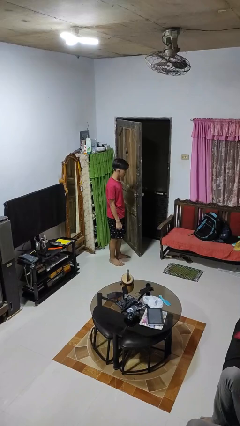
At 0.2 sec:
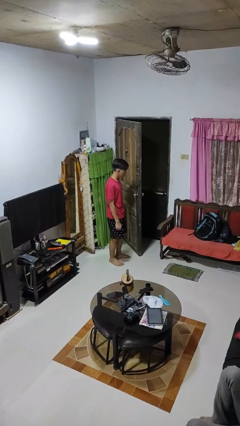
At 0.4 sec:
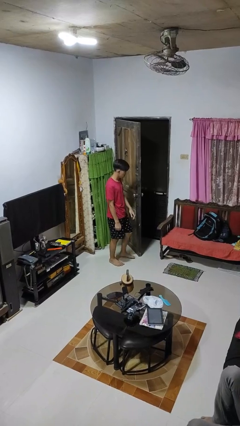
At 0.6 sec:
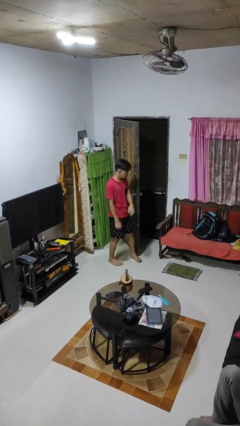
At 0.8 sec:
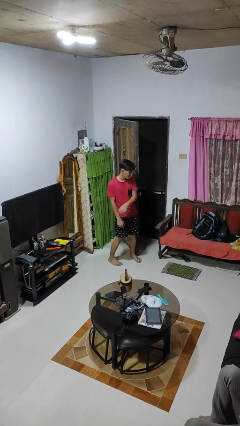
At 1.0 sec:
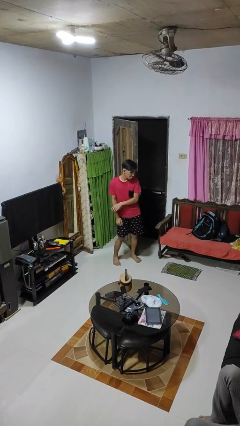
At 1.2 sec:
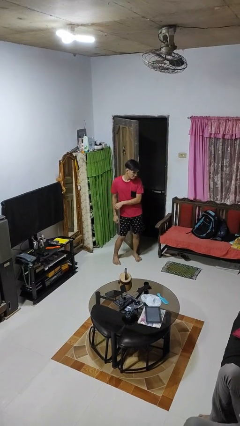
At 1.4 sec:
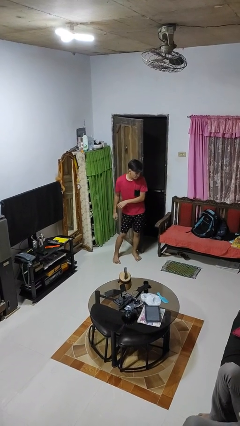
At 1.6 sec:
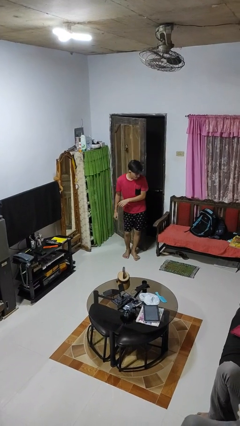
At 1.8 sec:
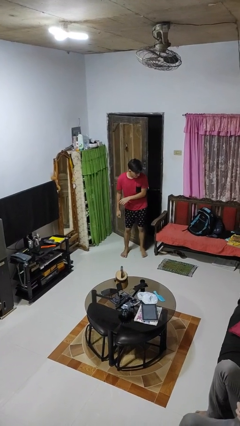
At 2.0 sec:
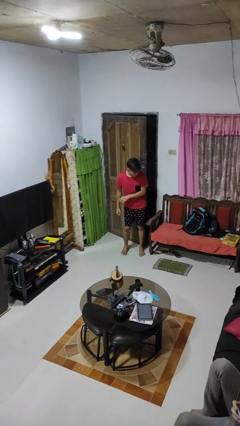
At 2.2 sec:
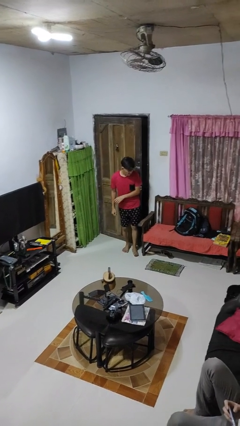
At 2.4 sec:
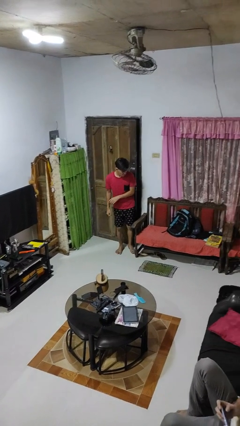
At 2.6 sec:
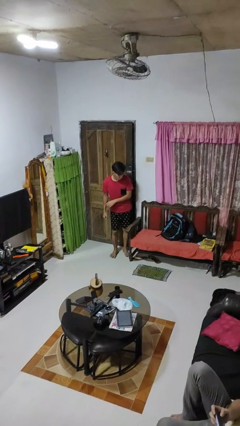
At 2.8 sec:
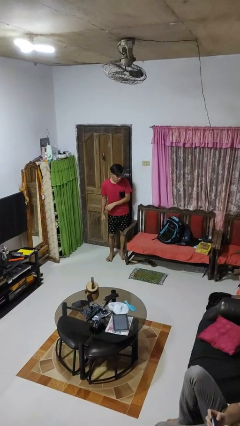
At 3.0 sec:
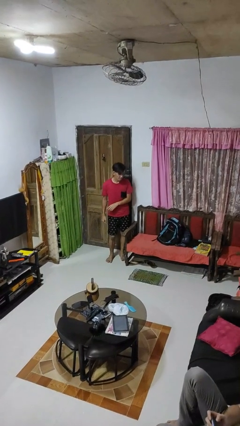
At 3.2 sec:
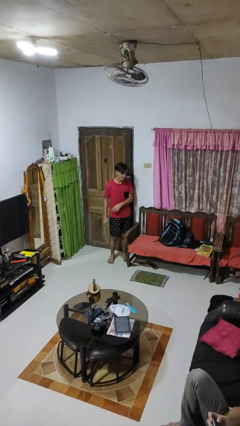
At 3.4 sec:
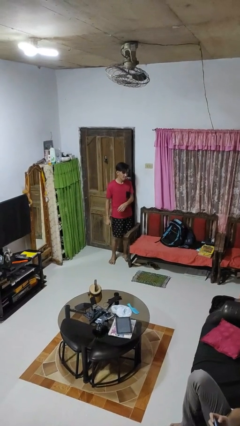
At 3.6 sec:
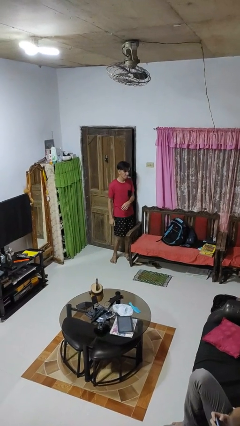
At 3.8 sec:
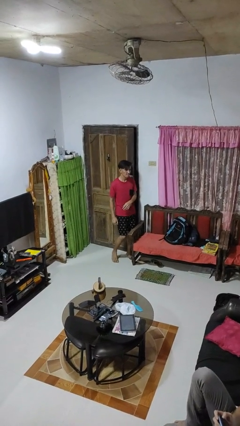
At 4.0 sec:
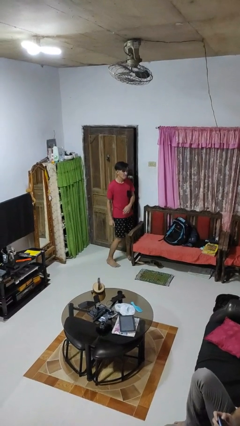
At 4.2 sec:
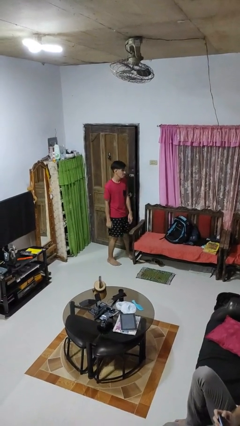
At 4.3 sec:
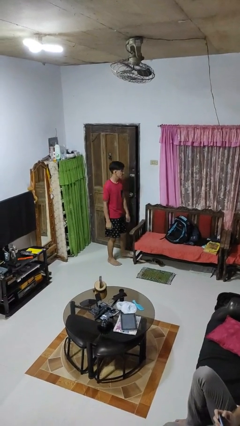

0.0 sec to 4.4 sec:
person closes door with hip

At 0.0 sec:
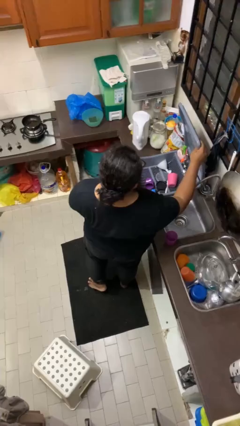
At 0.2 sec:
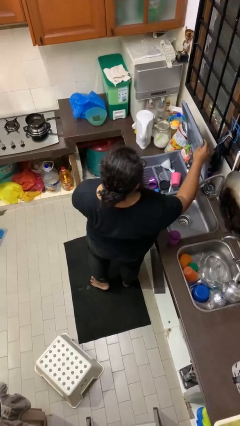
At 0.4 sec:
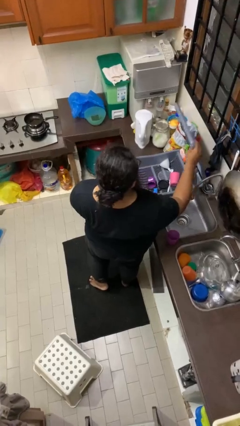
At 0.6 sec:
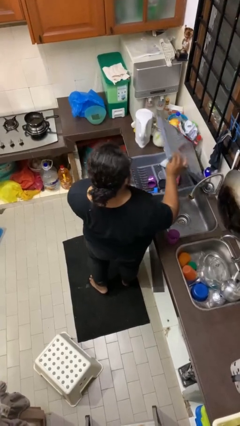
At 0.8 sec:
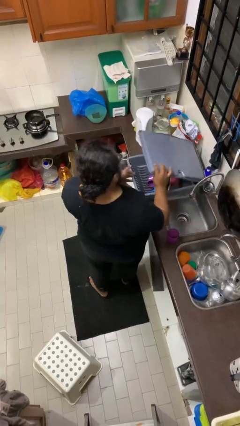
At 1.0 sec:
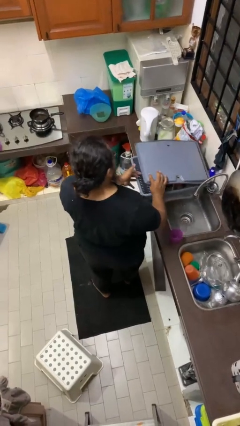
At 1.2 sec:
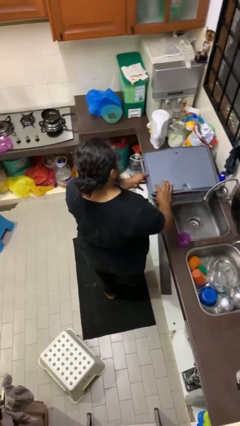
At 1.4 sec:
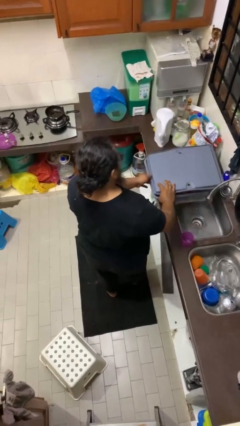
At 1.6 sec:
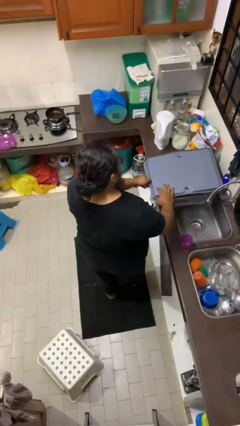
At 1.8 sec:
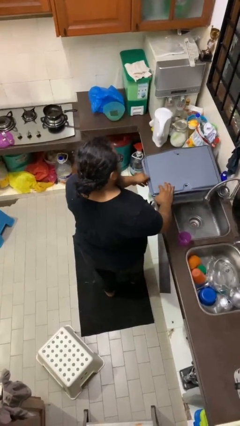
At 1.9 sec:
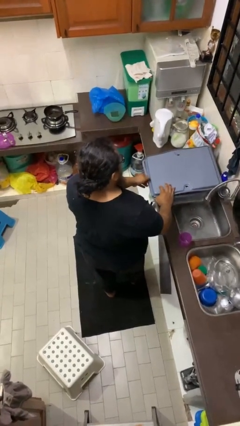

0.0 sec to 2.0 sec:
person closes dishwasher

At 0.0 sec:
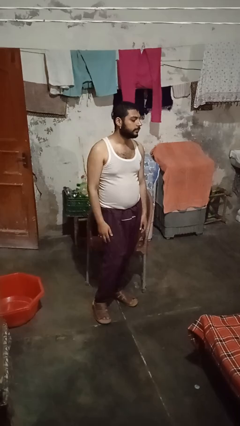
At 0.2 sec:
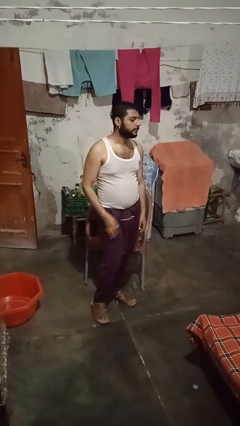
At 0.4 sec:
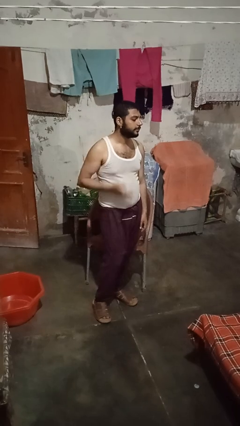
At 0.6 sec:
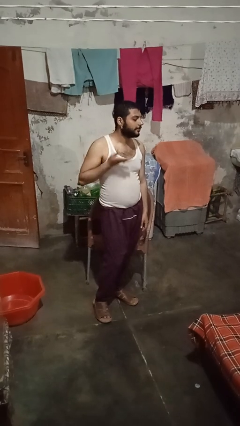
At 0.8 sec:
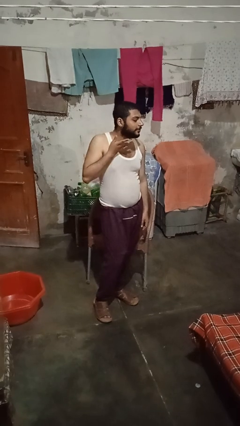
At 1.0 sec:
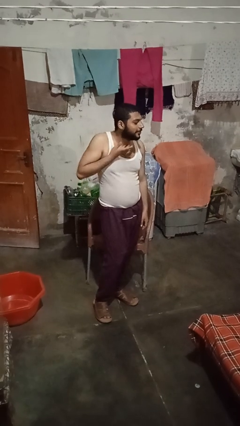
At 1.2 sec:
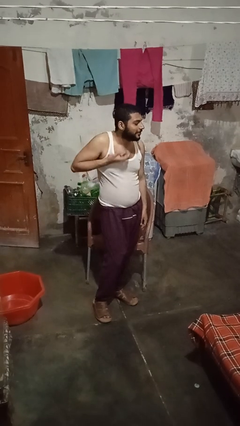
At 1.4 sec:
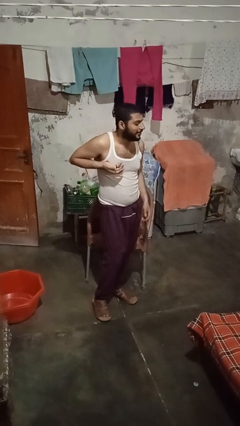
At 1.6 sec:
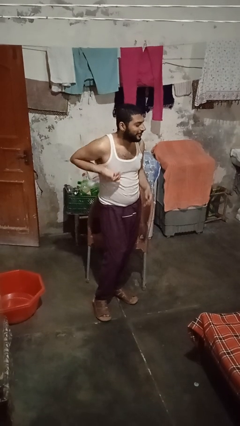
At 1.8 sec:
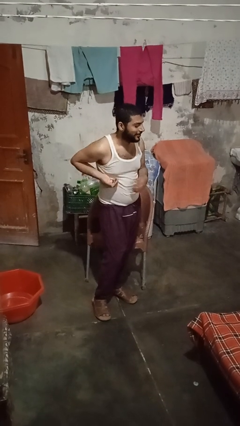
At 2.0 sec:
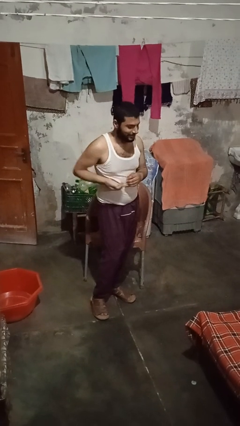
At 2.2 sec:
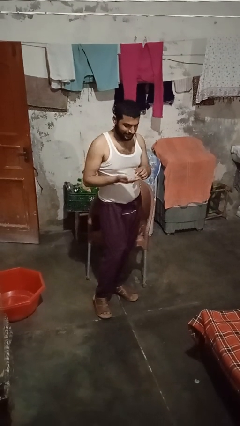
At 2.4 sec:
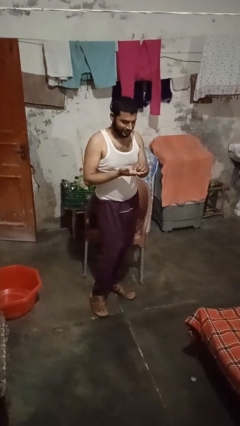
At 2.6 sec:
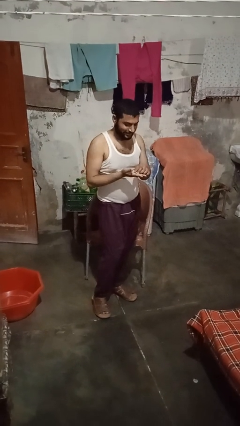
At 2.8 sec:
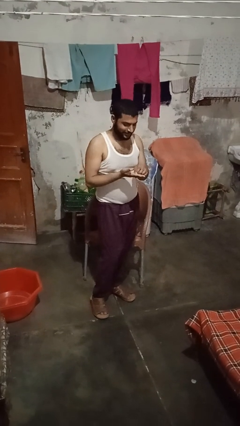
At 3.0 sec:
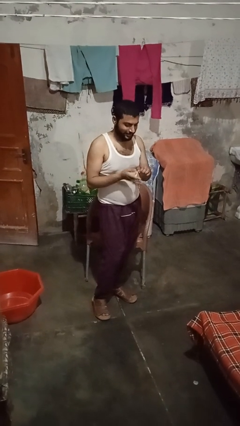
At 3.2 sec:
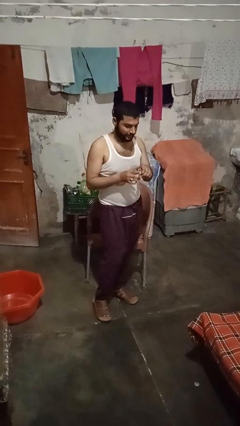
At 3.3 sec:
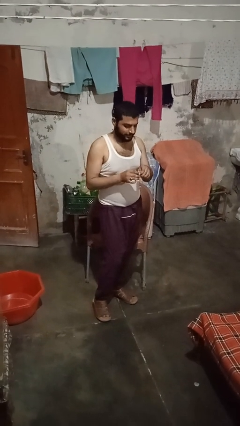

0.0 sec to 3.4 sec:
person takes off earrings

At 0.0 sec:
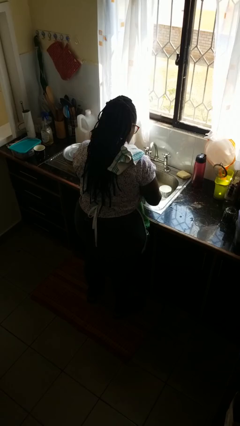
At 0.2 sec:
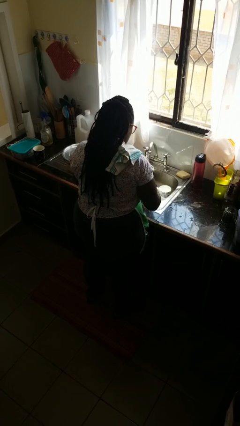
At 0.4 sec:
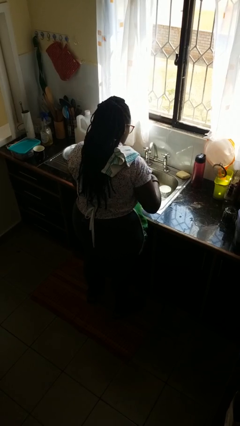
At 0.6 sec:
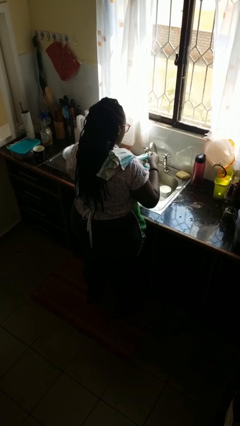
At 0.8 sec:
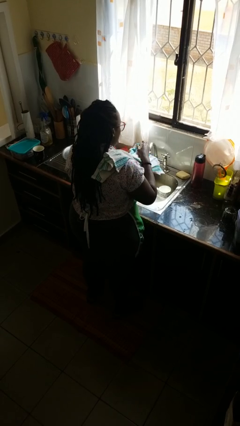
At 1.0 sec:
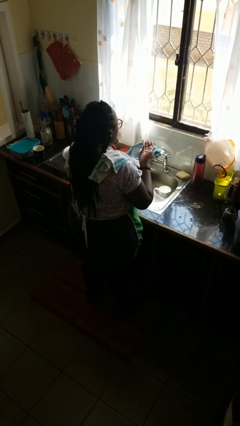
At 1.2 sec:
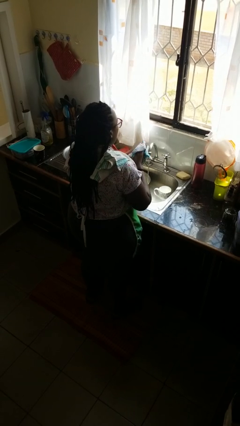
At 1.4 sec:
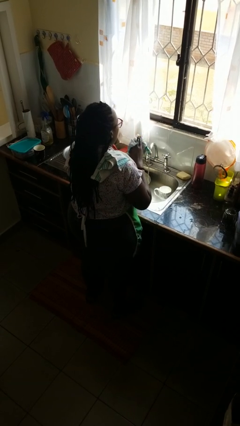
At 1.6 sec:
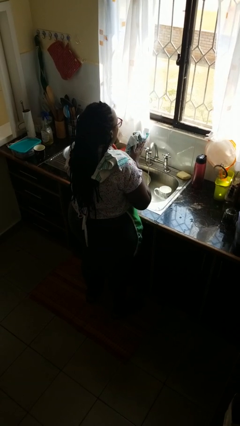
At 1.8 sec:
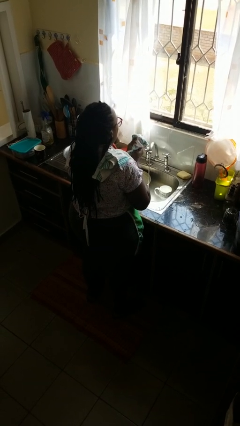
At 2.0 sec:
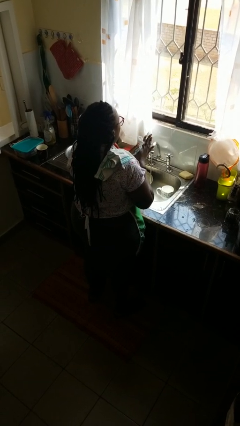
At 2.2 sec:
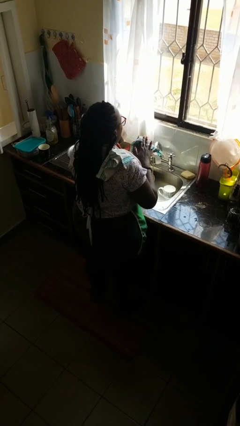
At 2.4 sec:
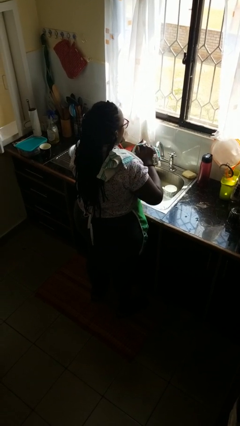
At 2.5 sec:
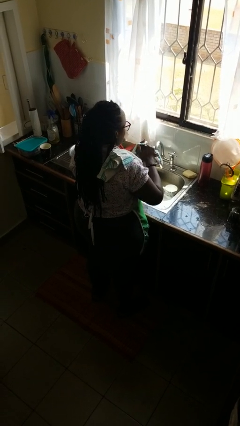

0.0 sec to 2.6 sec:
person dries hands with towel

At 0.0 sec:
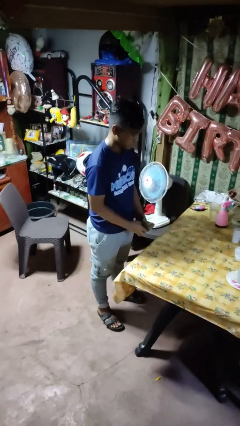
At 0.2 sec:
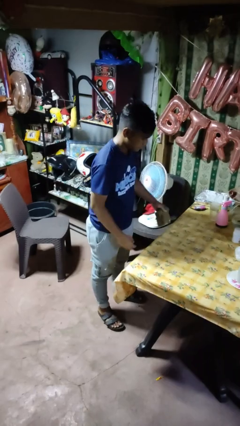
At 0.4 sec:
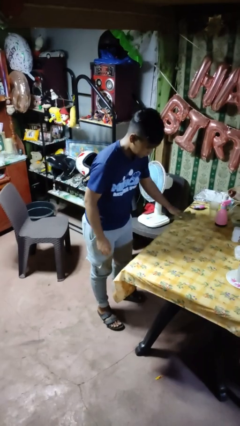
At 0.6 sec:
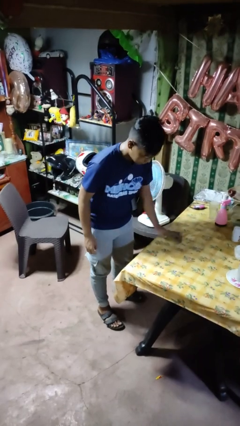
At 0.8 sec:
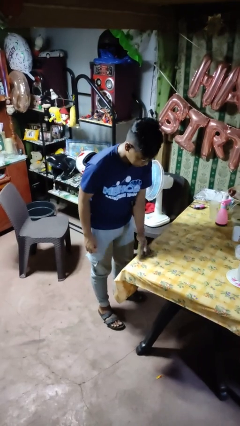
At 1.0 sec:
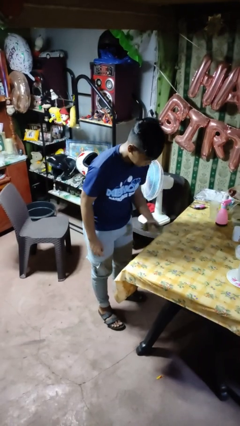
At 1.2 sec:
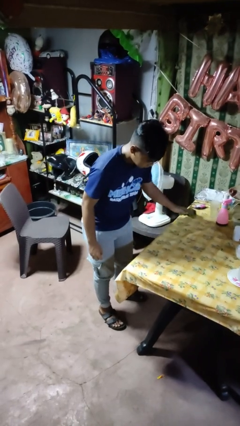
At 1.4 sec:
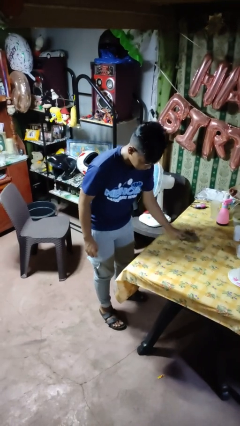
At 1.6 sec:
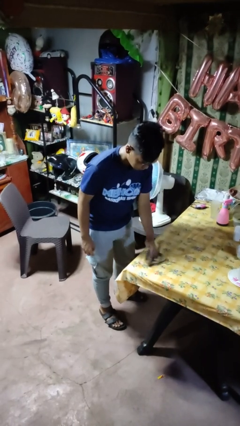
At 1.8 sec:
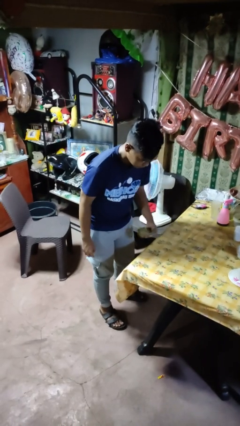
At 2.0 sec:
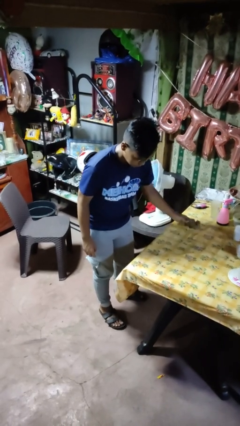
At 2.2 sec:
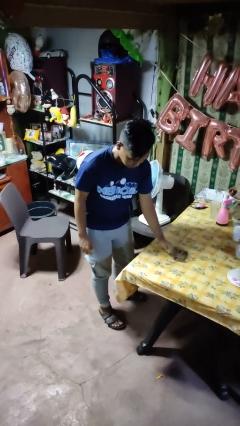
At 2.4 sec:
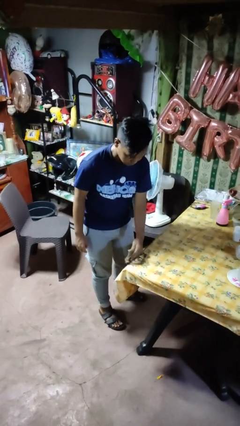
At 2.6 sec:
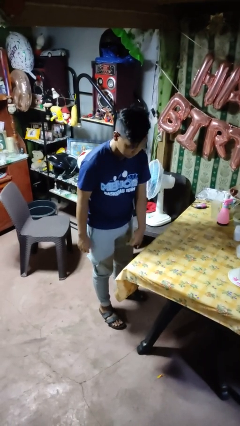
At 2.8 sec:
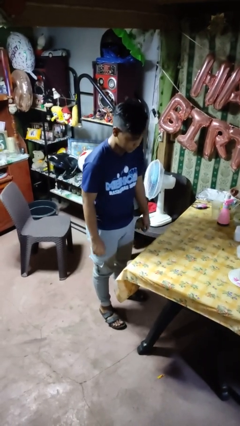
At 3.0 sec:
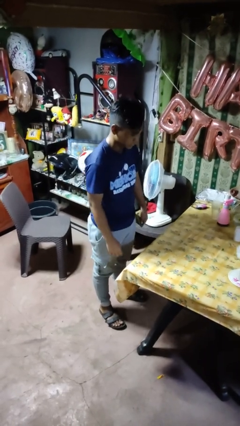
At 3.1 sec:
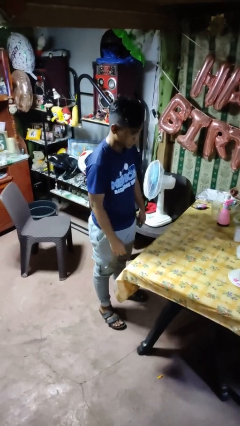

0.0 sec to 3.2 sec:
person cleans table with rag

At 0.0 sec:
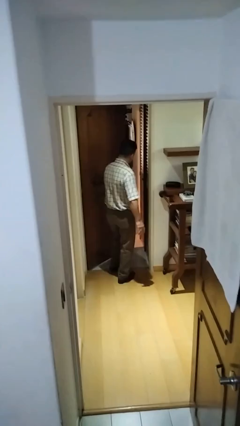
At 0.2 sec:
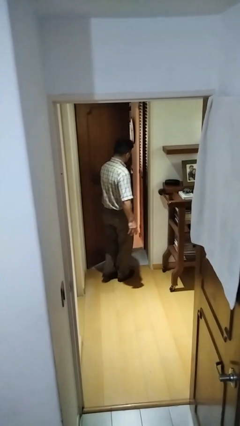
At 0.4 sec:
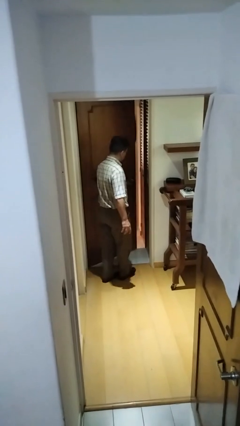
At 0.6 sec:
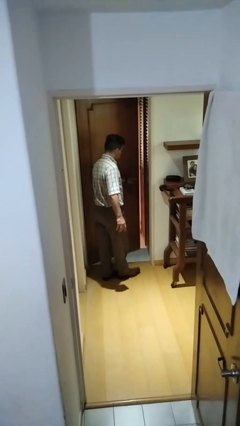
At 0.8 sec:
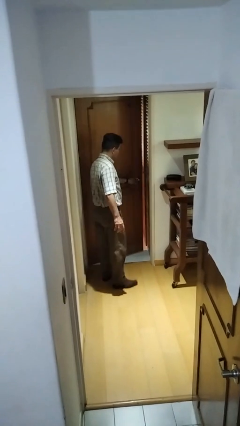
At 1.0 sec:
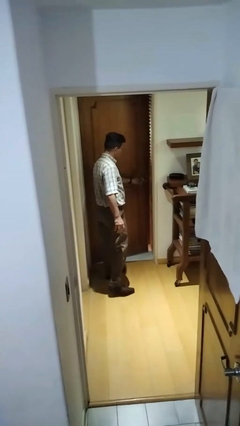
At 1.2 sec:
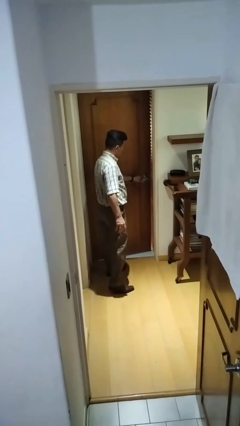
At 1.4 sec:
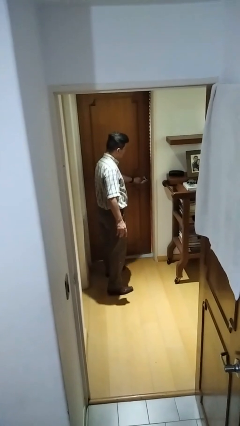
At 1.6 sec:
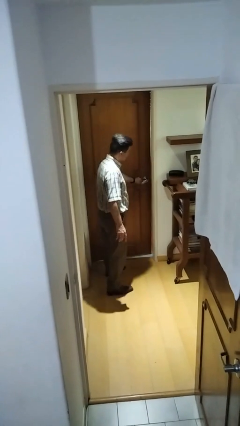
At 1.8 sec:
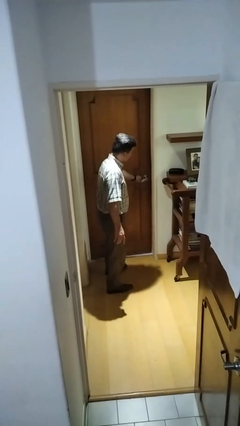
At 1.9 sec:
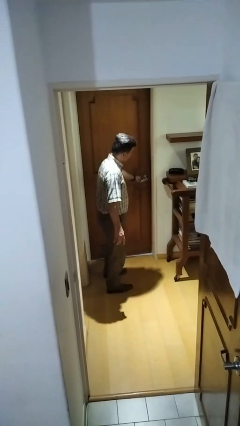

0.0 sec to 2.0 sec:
person closes facility door
